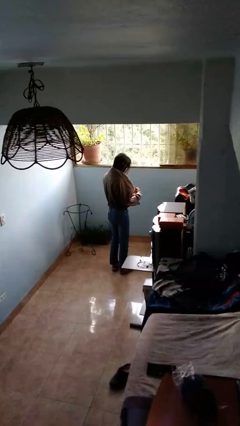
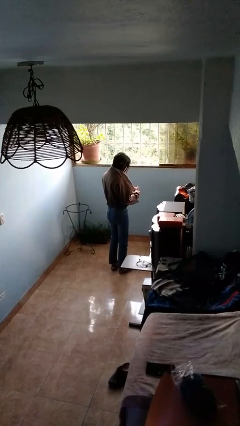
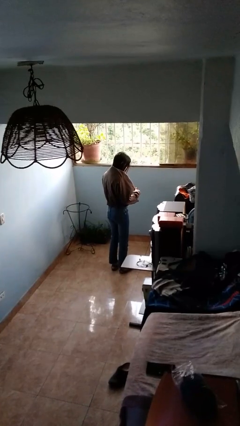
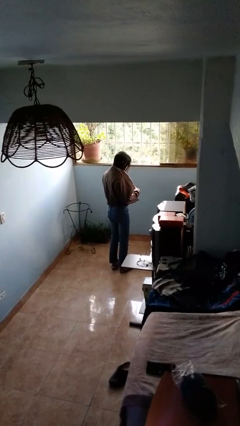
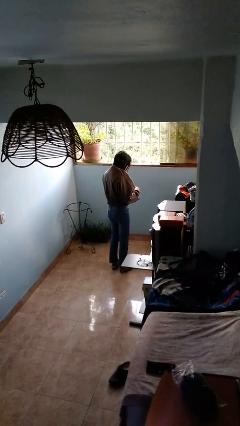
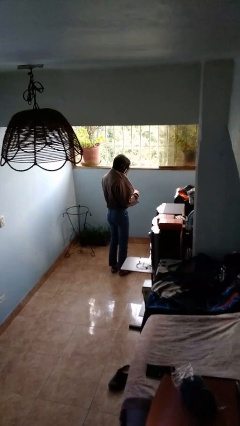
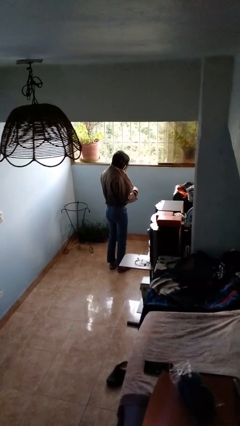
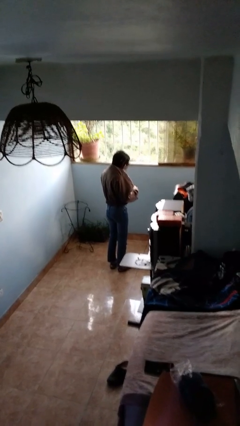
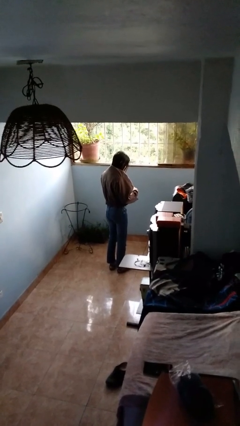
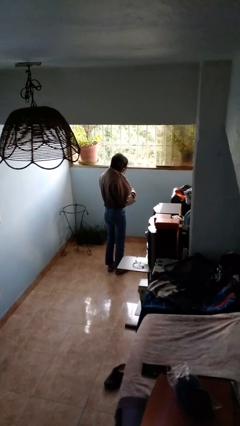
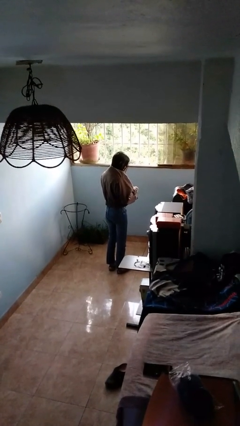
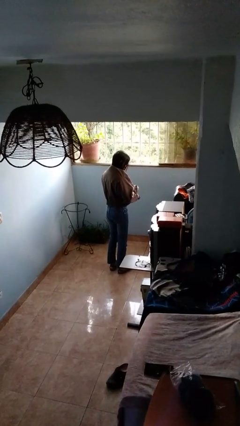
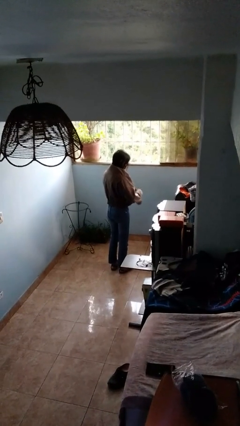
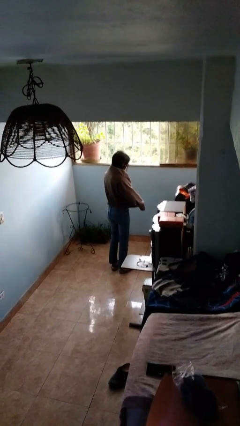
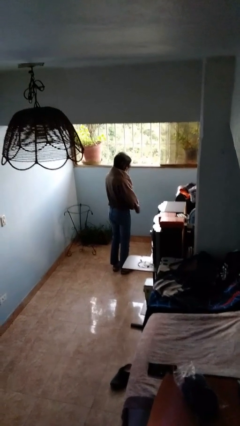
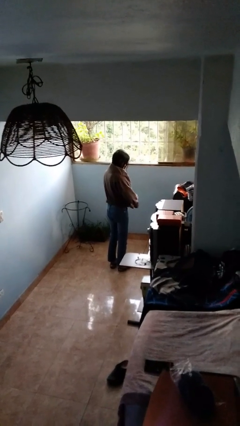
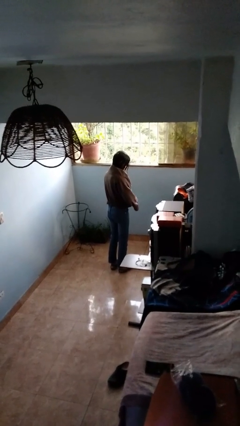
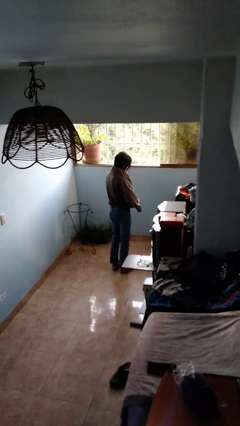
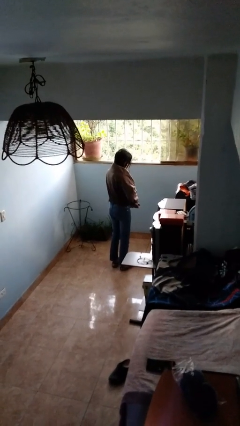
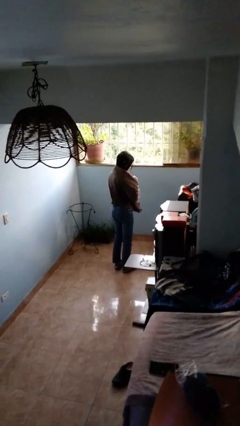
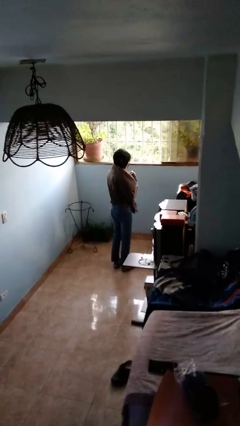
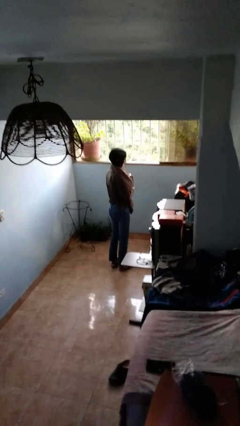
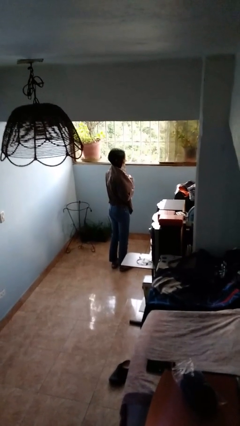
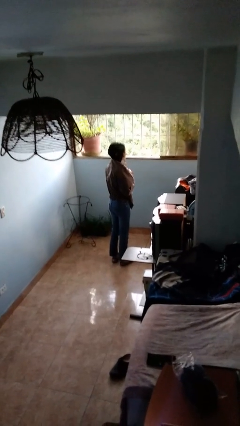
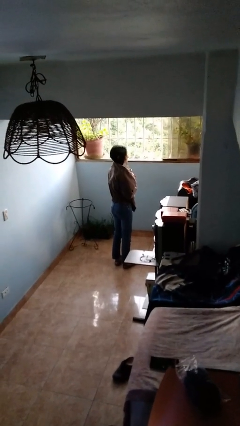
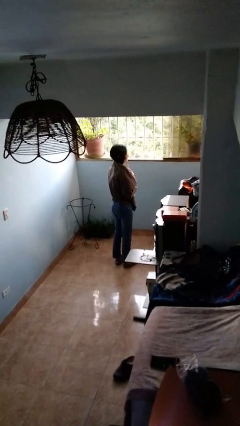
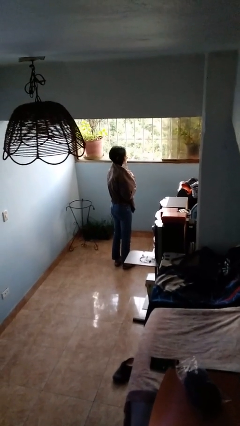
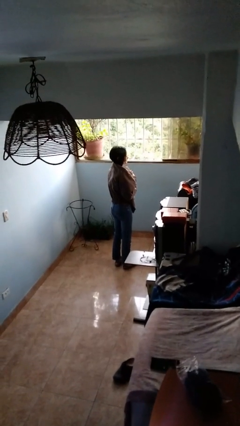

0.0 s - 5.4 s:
person zips up jacket

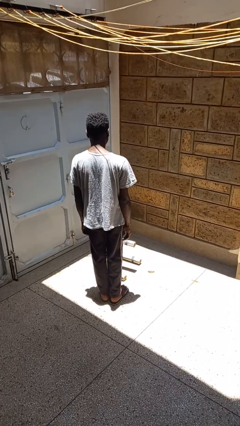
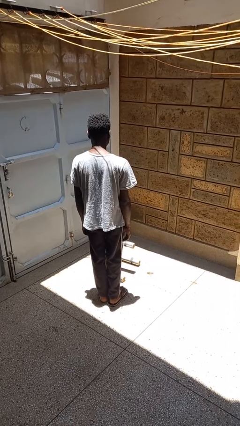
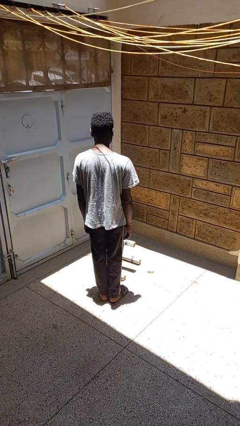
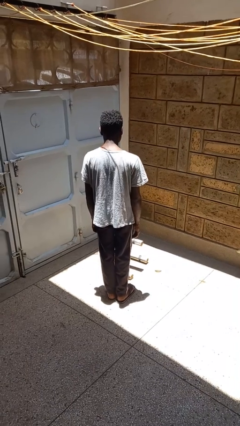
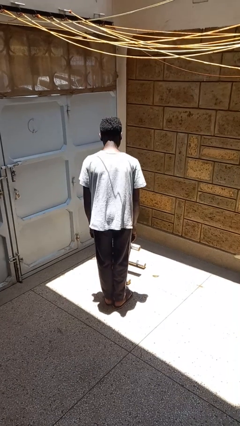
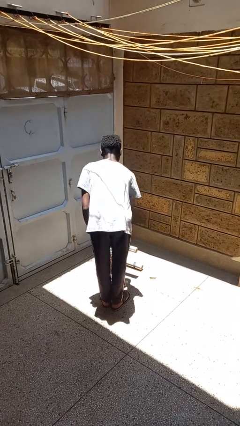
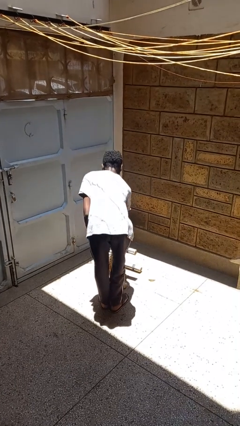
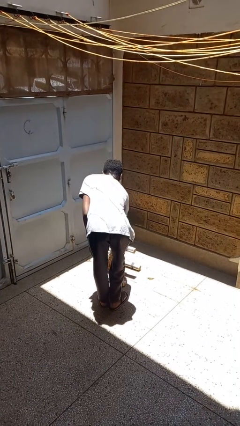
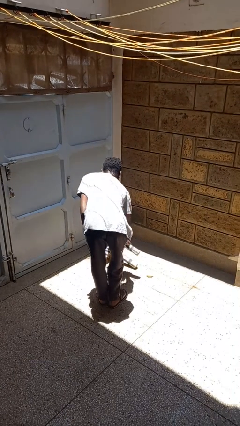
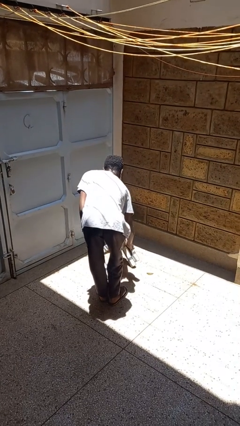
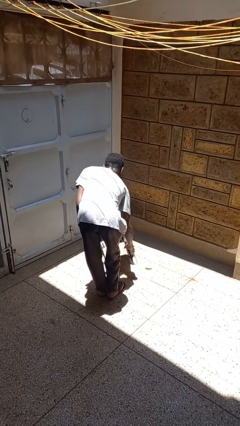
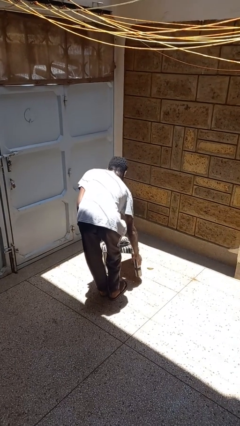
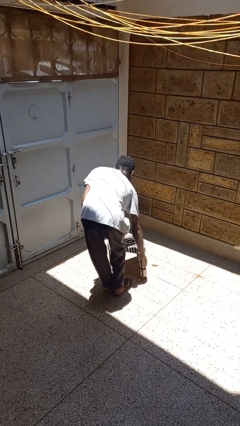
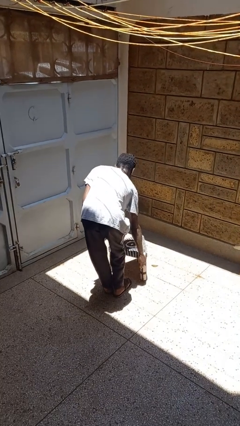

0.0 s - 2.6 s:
person sets upright furniture

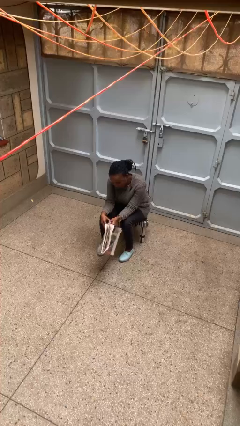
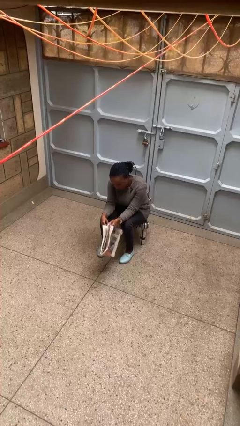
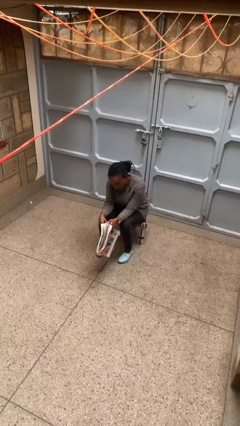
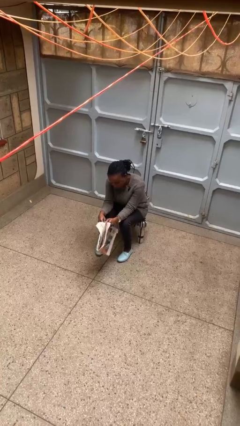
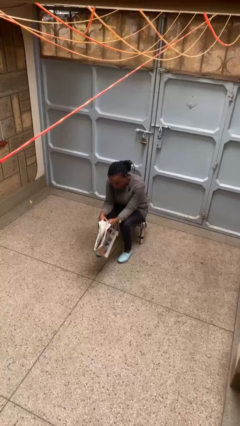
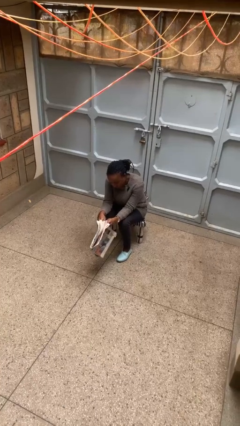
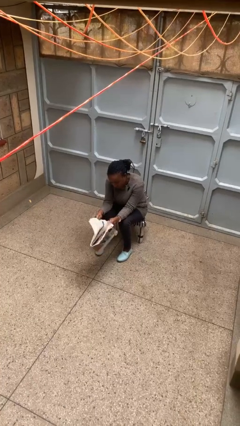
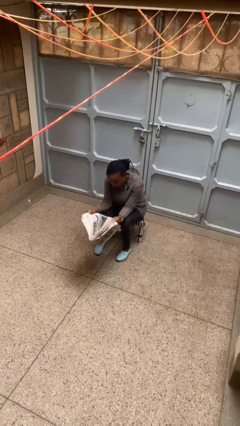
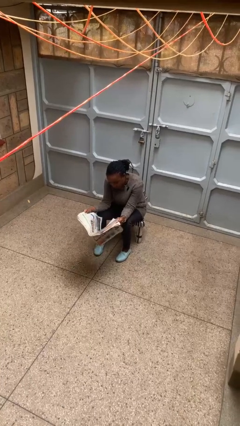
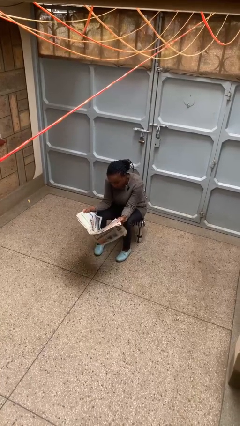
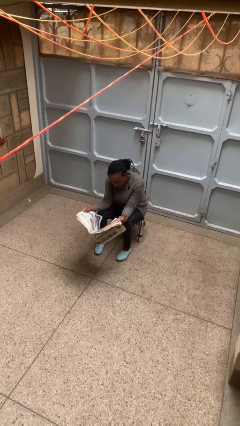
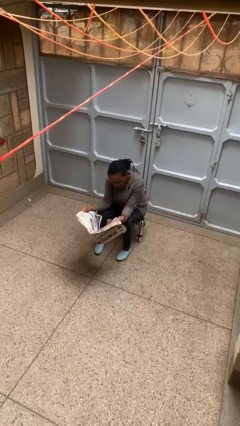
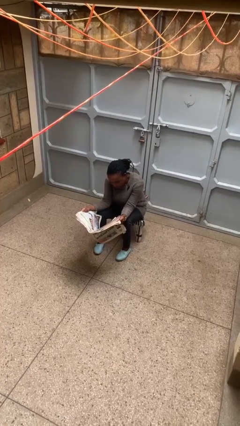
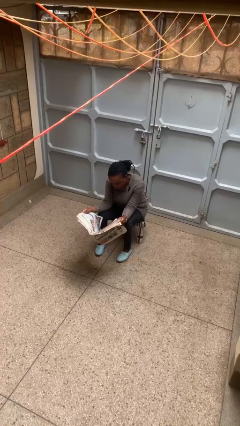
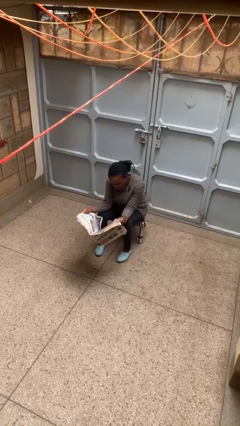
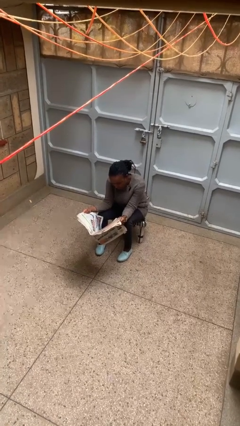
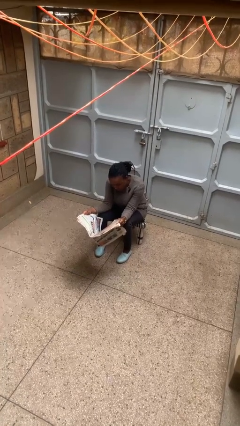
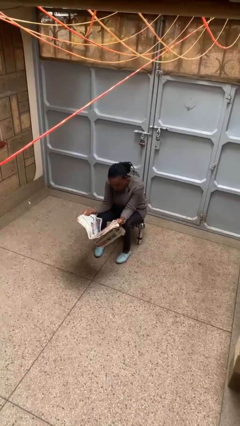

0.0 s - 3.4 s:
person reads newspaper

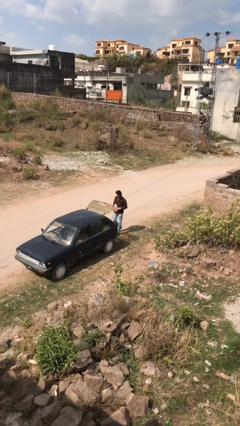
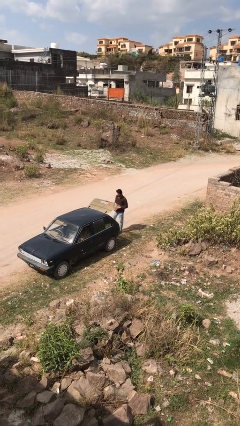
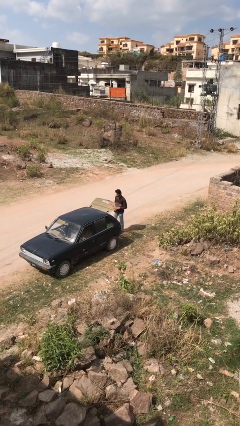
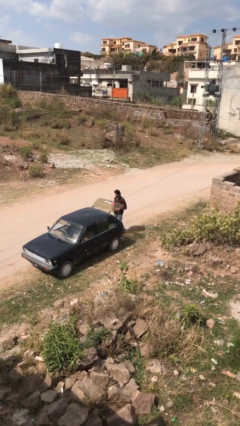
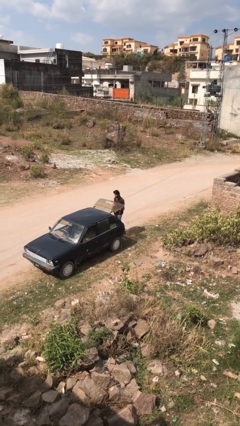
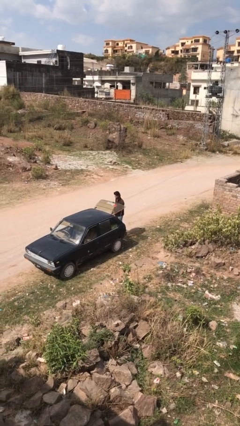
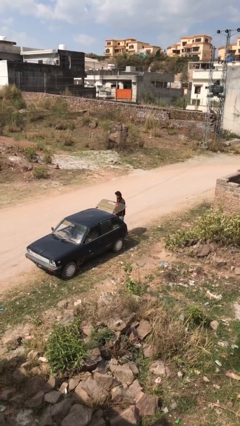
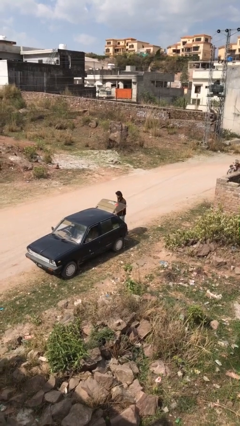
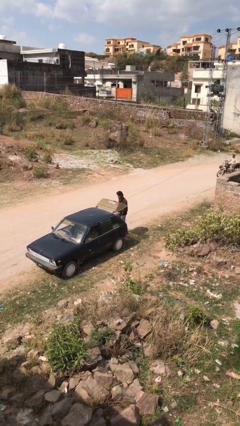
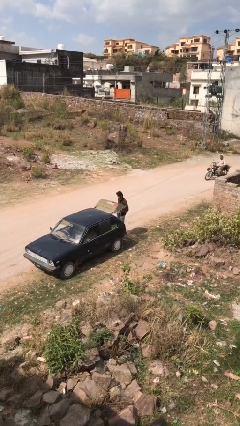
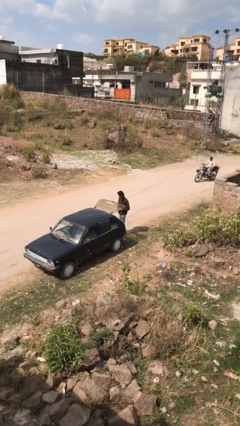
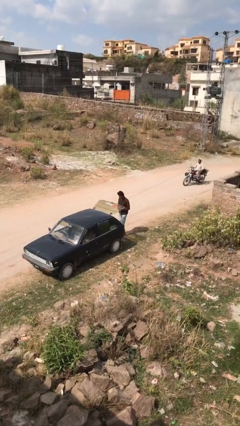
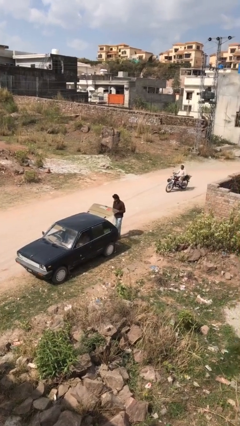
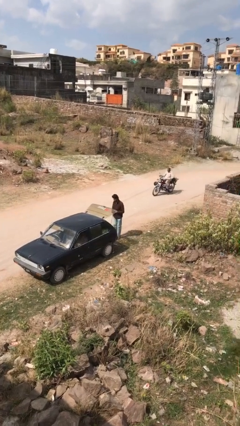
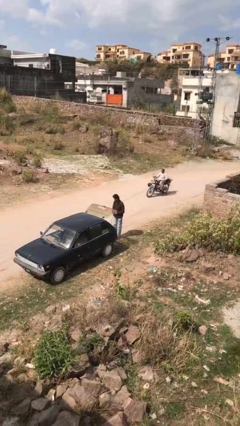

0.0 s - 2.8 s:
person loads car

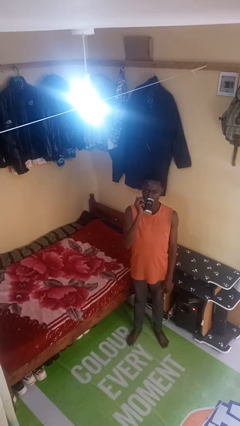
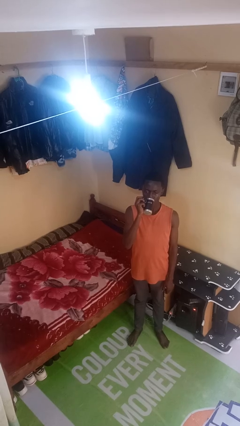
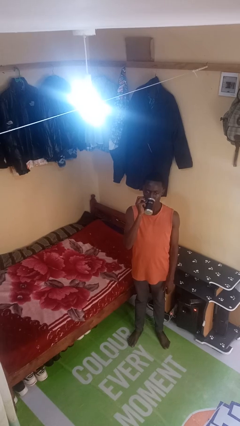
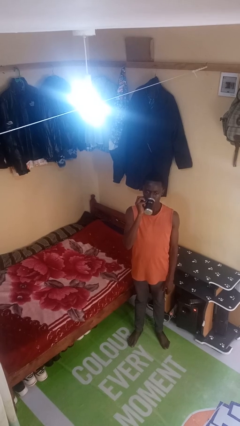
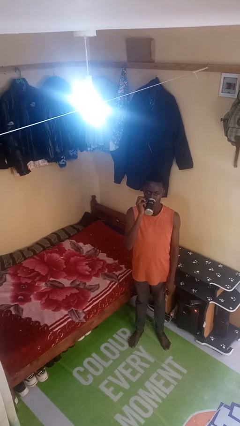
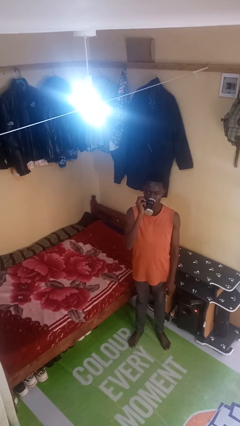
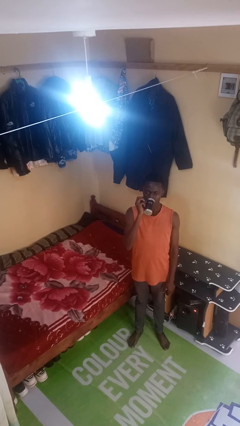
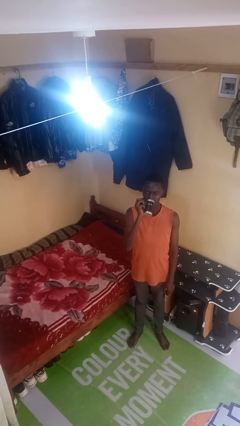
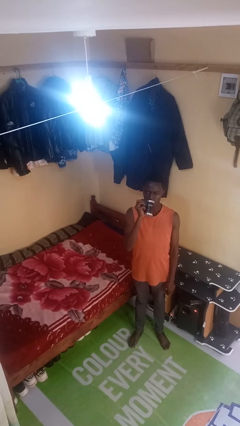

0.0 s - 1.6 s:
person drinks from beverage can

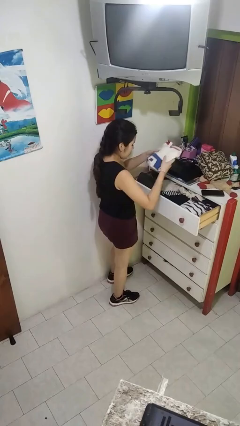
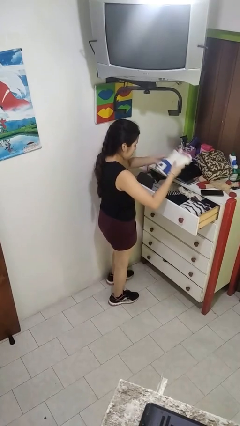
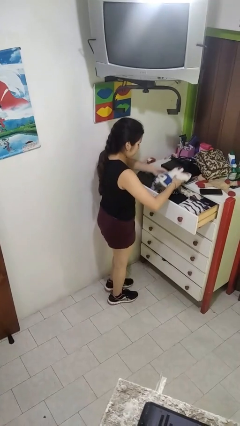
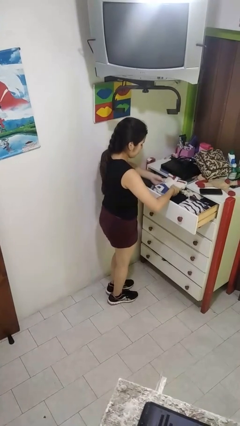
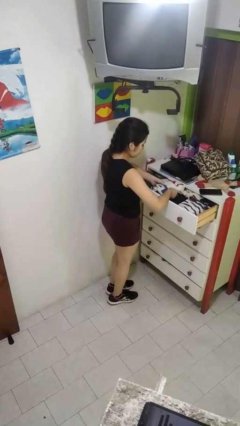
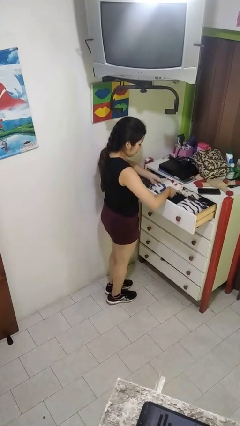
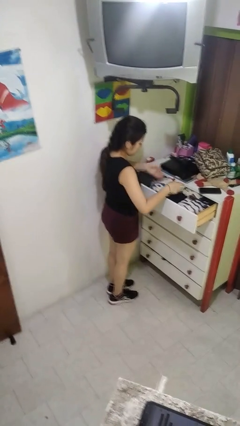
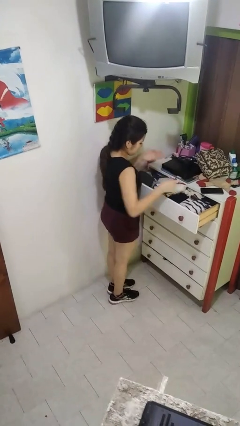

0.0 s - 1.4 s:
person puts clothes into dresser
